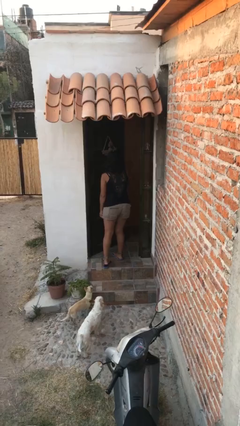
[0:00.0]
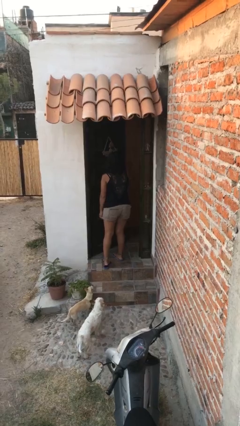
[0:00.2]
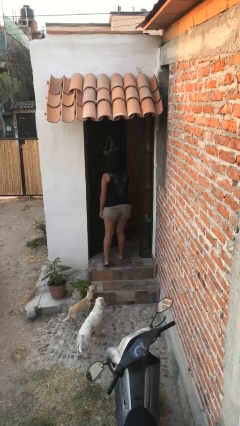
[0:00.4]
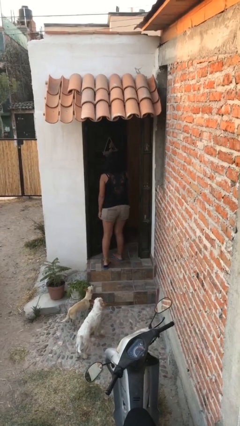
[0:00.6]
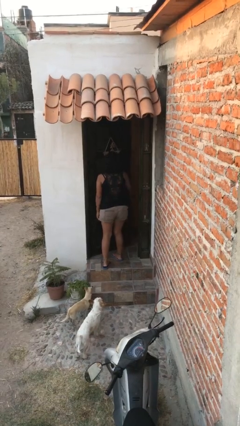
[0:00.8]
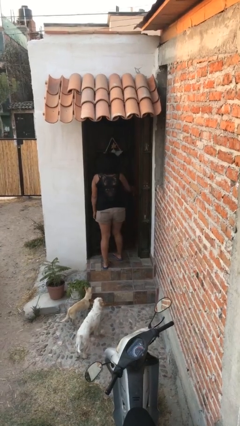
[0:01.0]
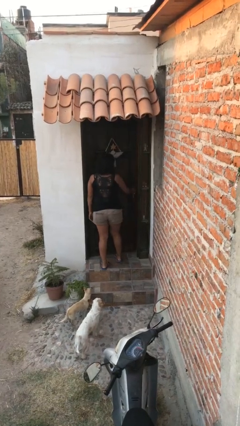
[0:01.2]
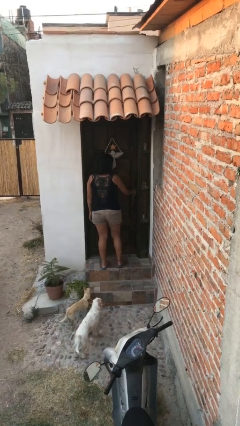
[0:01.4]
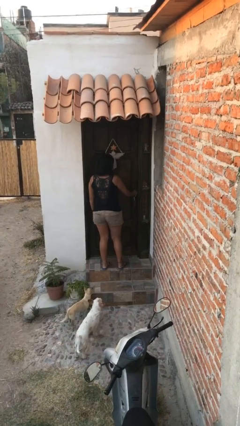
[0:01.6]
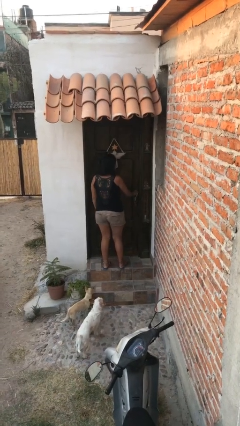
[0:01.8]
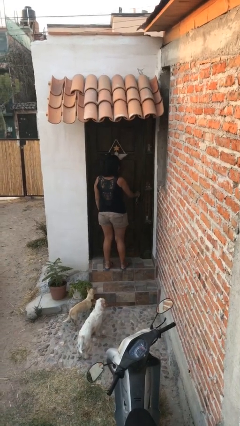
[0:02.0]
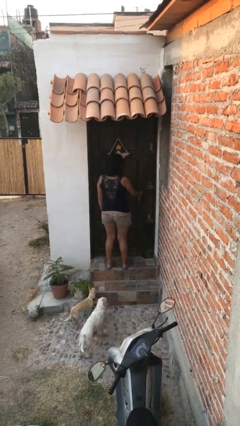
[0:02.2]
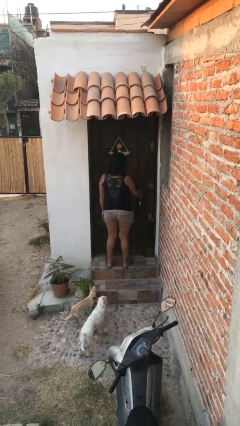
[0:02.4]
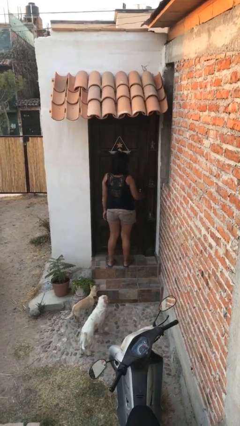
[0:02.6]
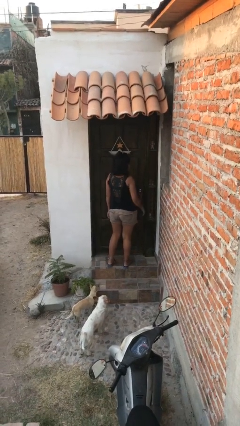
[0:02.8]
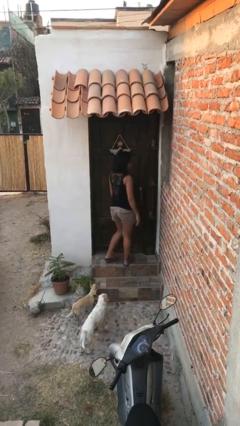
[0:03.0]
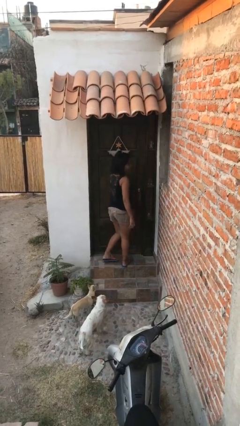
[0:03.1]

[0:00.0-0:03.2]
person closes facility door

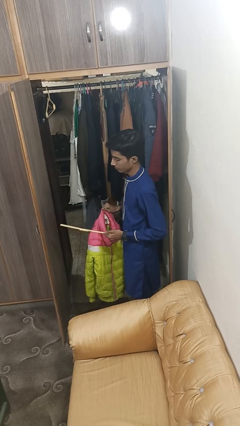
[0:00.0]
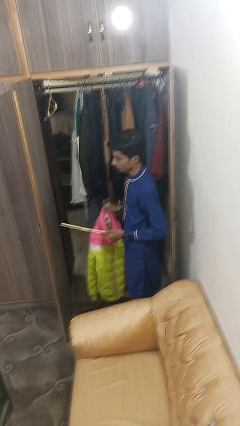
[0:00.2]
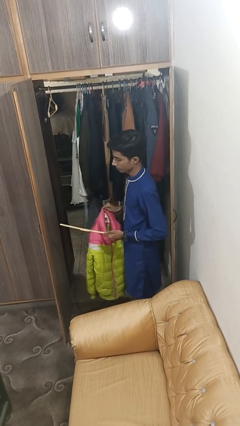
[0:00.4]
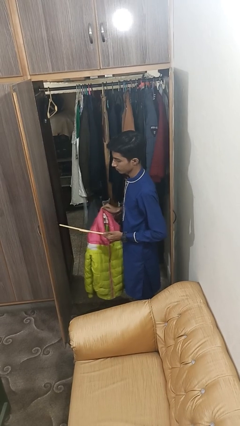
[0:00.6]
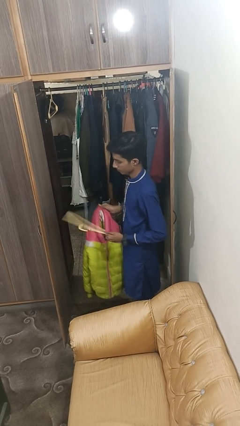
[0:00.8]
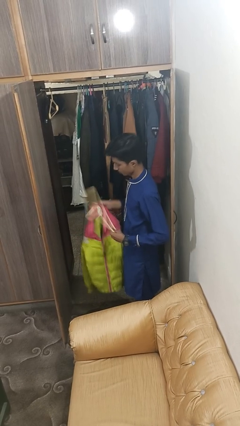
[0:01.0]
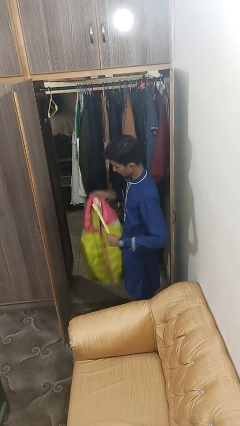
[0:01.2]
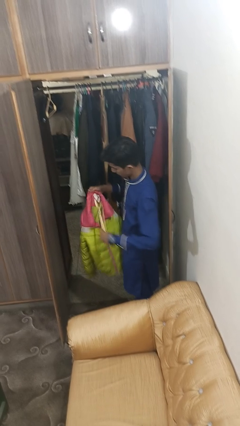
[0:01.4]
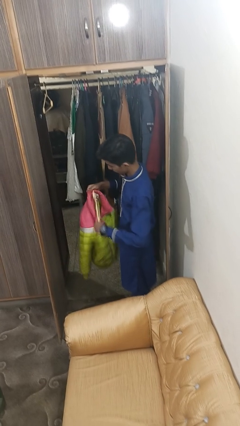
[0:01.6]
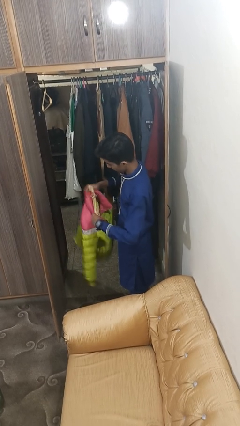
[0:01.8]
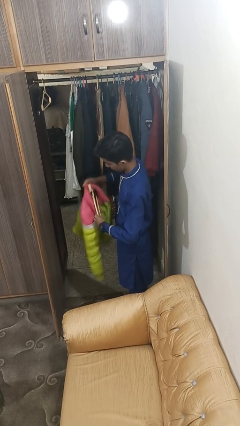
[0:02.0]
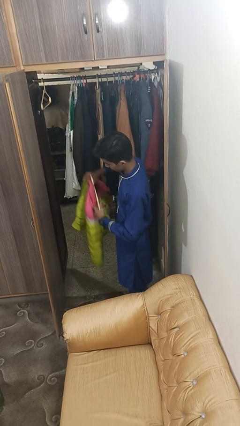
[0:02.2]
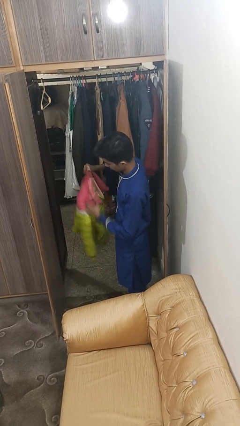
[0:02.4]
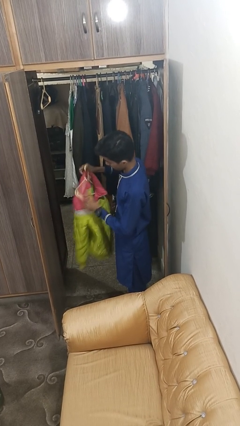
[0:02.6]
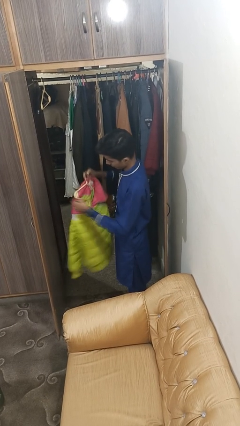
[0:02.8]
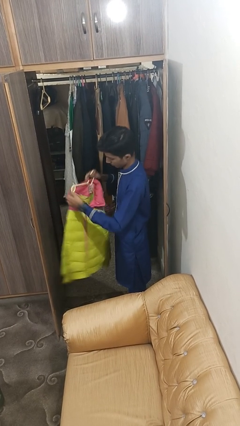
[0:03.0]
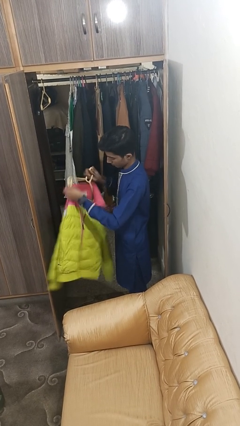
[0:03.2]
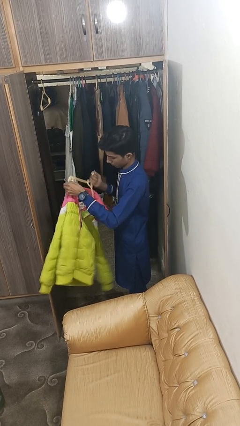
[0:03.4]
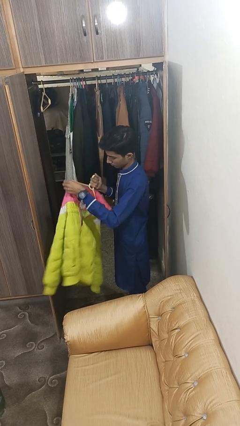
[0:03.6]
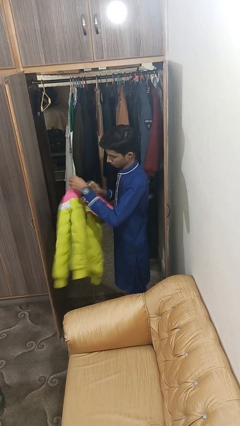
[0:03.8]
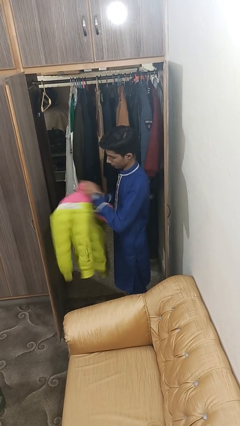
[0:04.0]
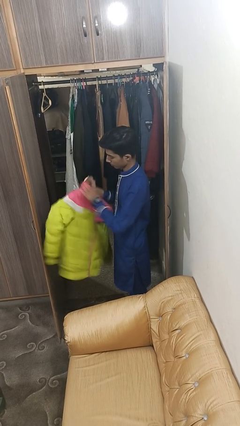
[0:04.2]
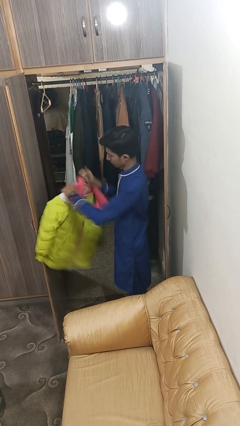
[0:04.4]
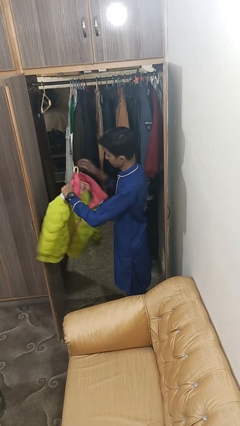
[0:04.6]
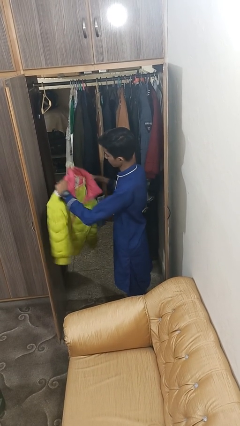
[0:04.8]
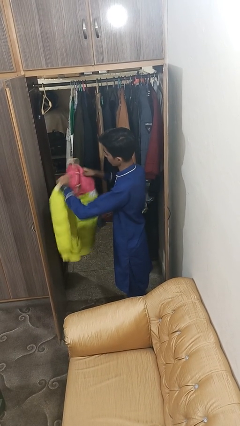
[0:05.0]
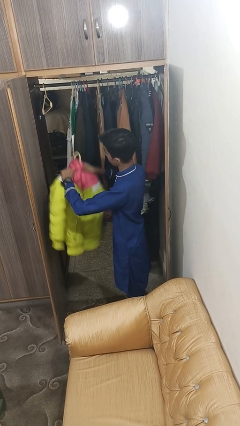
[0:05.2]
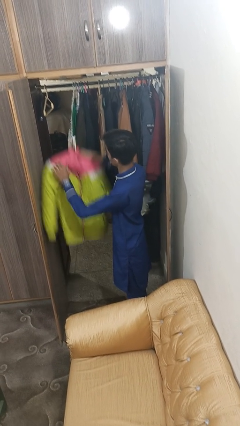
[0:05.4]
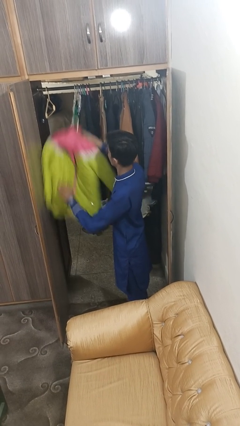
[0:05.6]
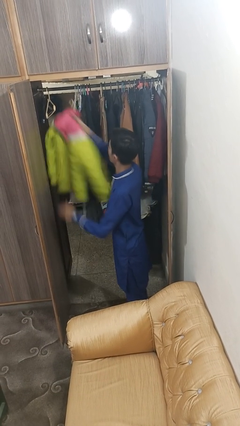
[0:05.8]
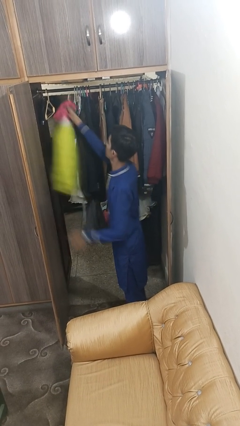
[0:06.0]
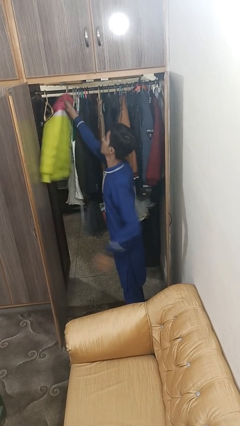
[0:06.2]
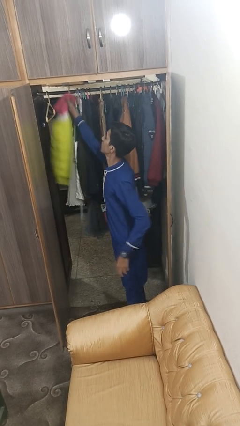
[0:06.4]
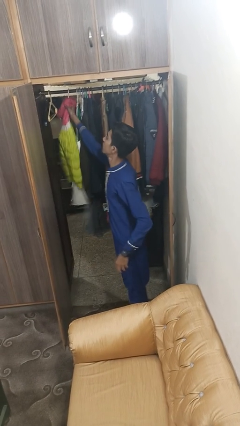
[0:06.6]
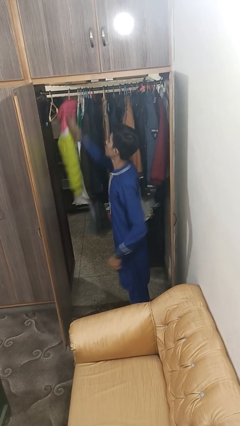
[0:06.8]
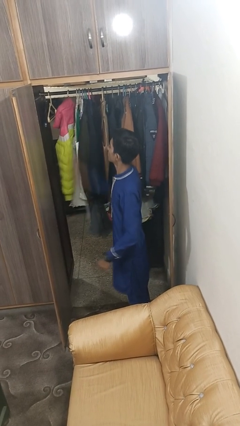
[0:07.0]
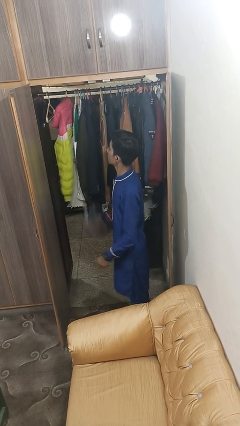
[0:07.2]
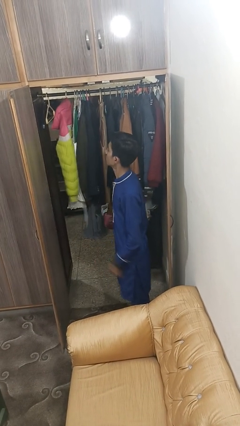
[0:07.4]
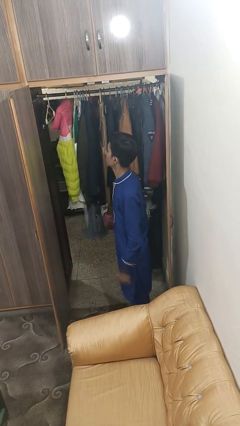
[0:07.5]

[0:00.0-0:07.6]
person puts clothes into closet

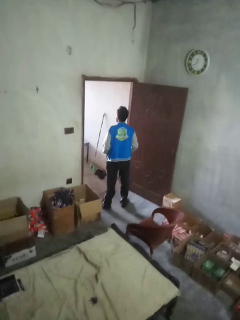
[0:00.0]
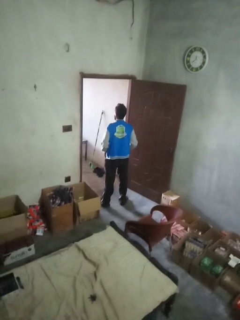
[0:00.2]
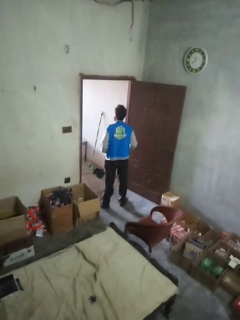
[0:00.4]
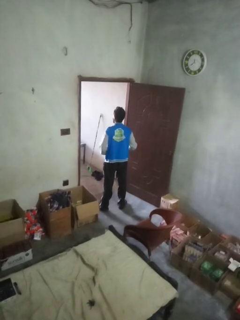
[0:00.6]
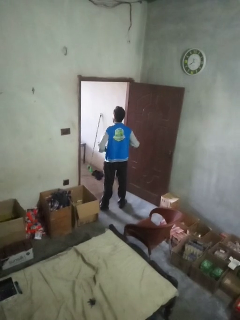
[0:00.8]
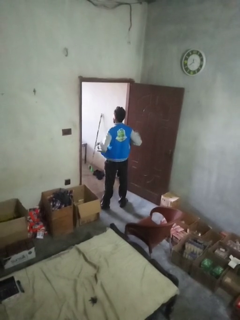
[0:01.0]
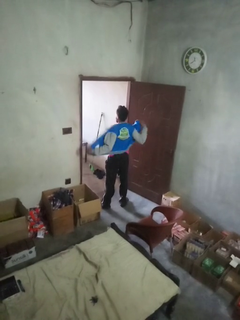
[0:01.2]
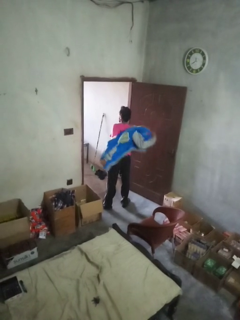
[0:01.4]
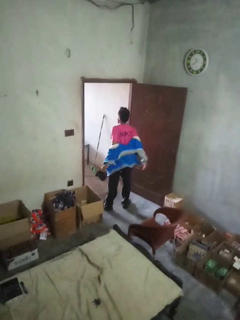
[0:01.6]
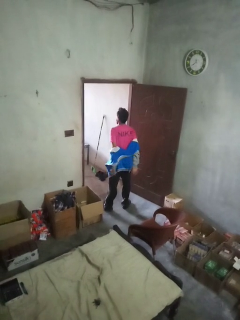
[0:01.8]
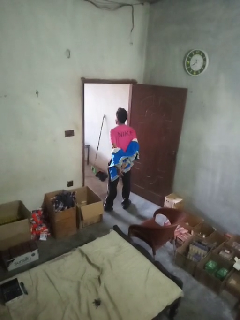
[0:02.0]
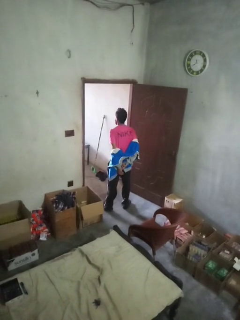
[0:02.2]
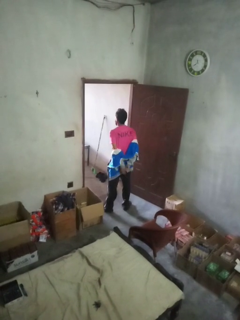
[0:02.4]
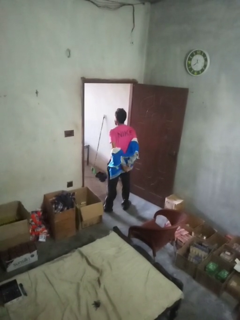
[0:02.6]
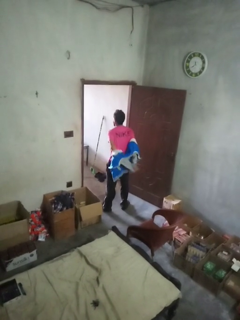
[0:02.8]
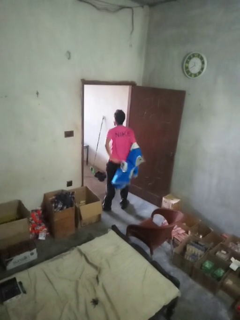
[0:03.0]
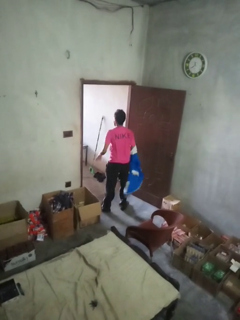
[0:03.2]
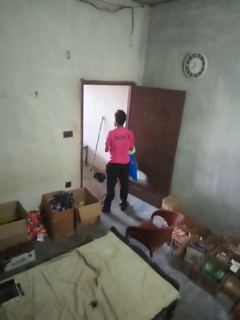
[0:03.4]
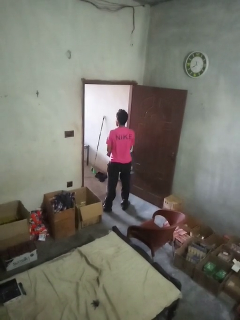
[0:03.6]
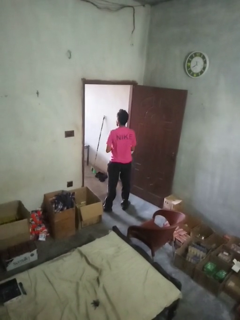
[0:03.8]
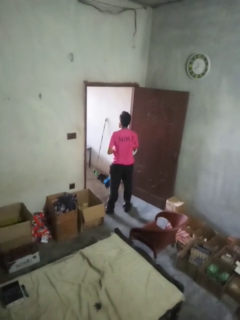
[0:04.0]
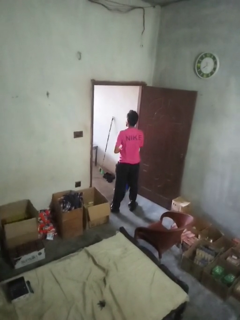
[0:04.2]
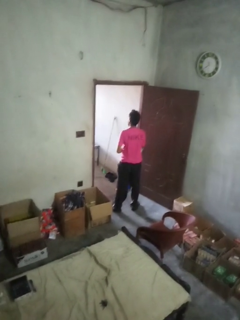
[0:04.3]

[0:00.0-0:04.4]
person takes off jacket

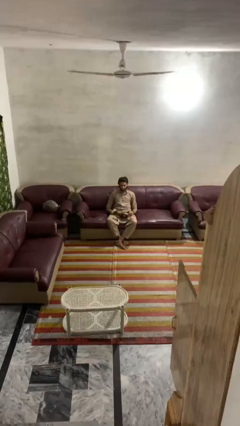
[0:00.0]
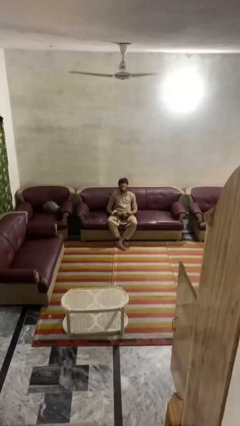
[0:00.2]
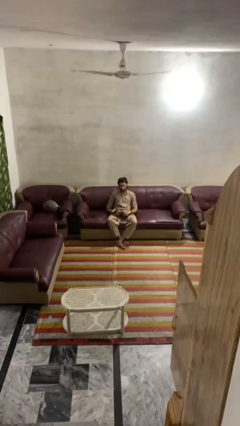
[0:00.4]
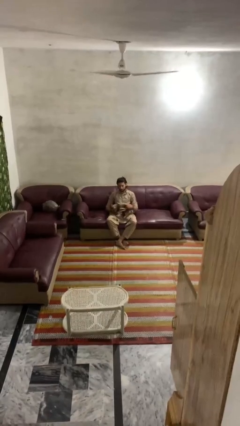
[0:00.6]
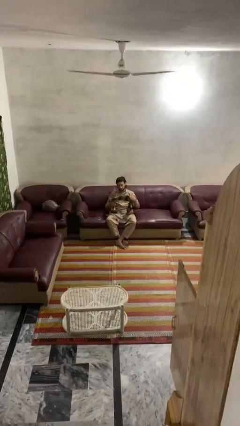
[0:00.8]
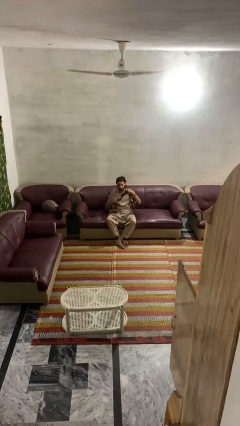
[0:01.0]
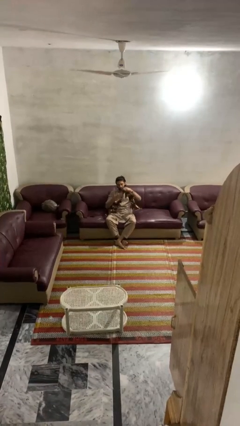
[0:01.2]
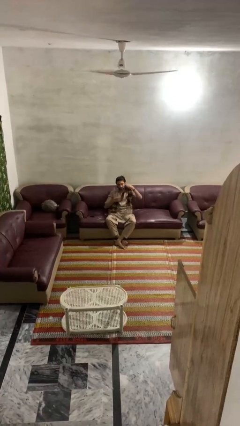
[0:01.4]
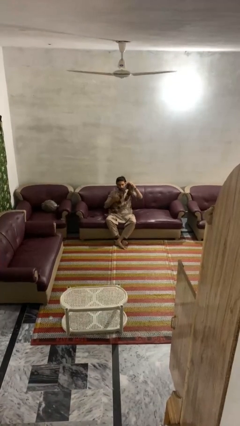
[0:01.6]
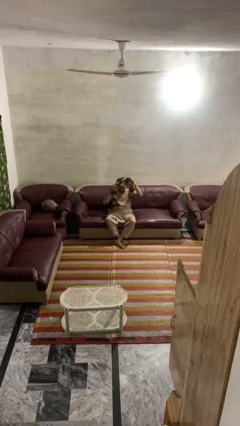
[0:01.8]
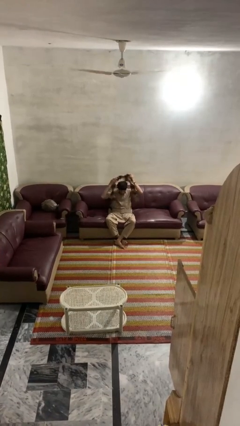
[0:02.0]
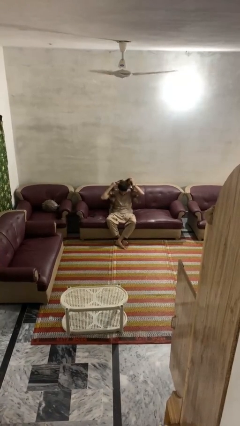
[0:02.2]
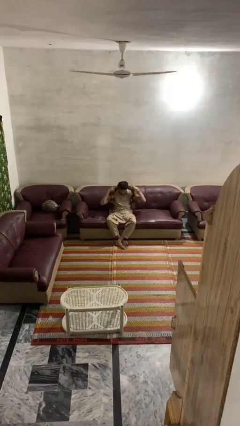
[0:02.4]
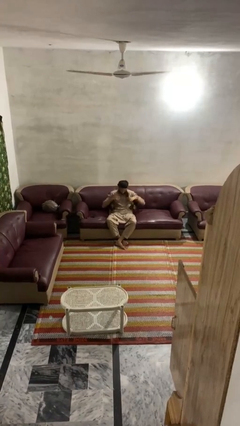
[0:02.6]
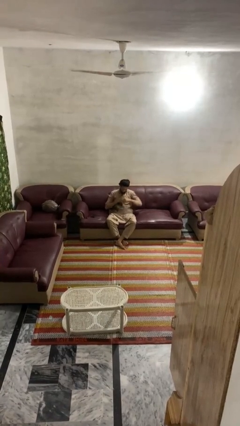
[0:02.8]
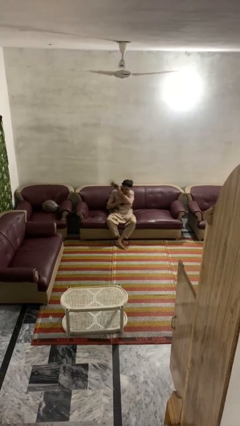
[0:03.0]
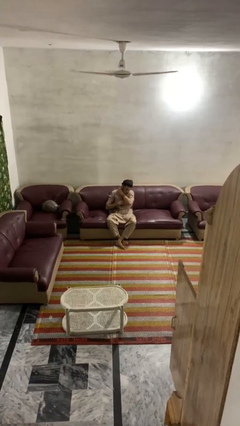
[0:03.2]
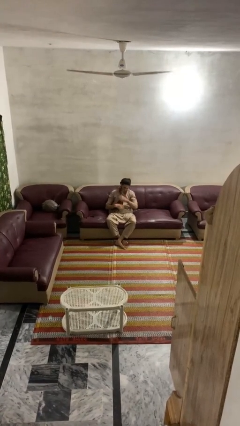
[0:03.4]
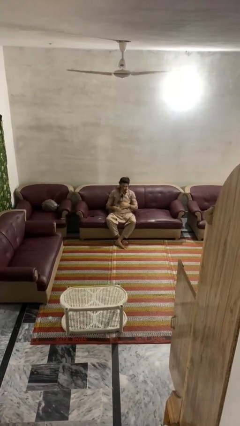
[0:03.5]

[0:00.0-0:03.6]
person puts on scarf
